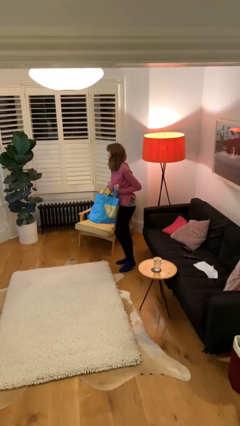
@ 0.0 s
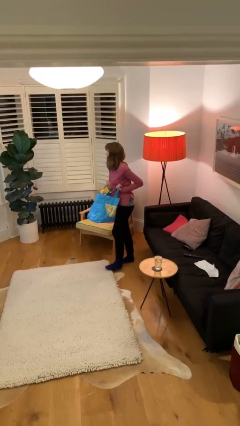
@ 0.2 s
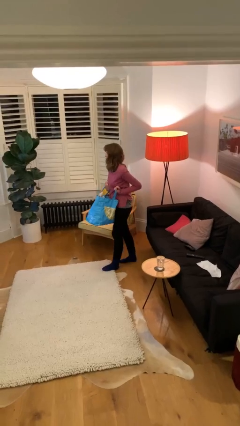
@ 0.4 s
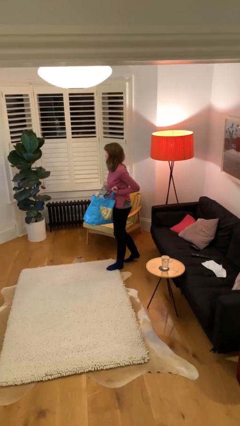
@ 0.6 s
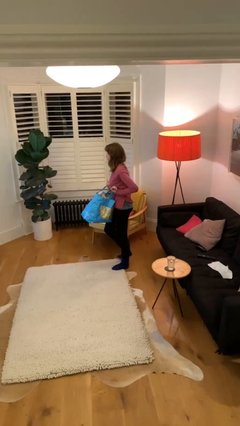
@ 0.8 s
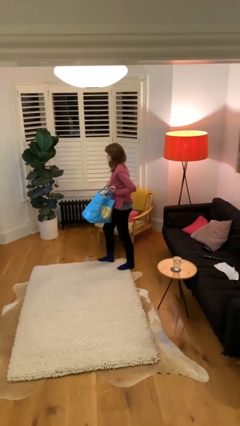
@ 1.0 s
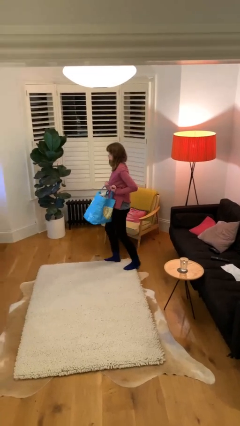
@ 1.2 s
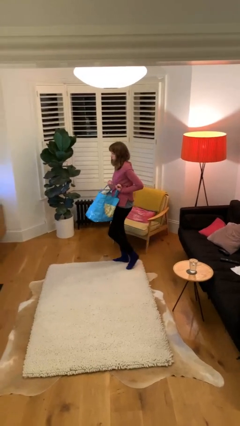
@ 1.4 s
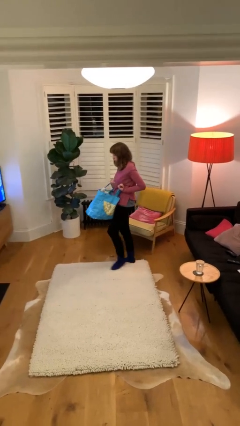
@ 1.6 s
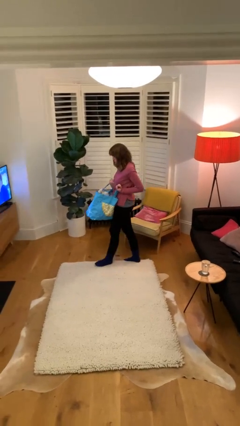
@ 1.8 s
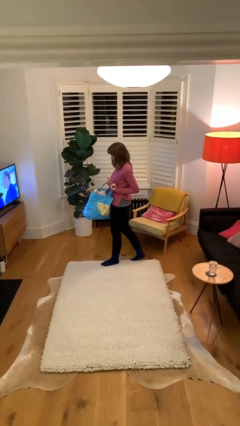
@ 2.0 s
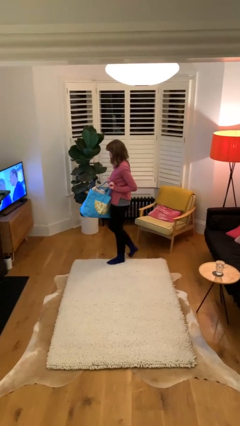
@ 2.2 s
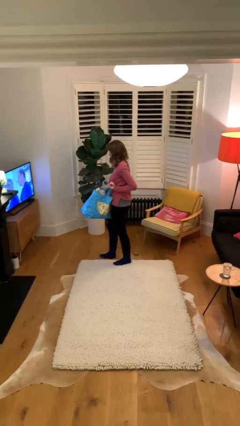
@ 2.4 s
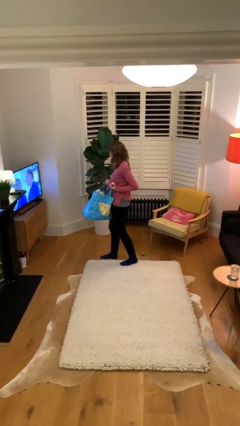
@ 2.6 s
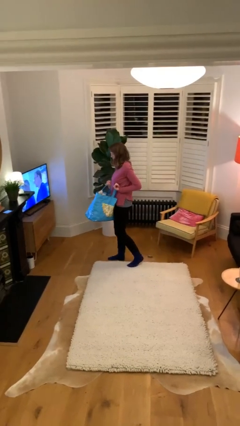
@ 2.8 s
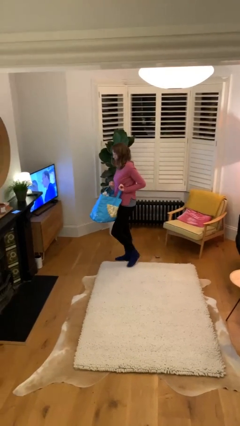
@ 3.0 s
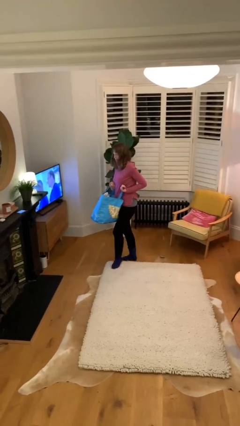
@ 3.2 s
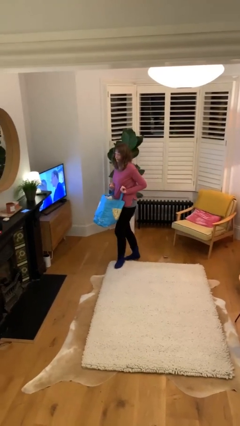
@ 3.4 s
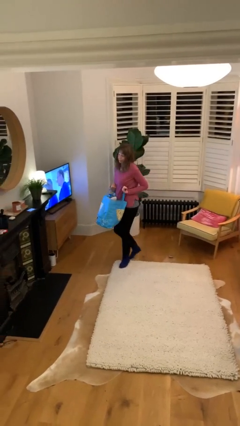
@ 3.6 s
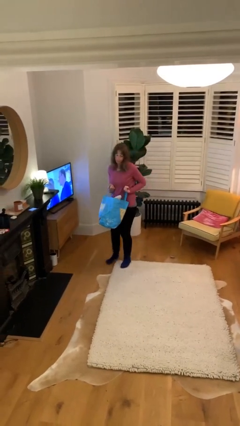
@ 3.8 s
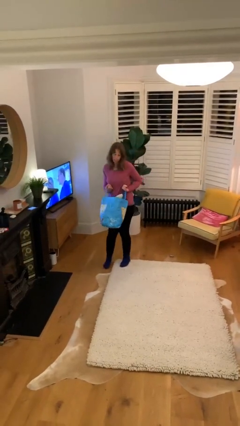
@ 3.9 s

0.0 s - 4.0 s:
person carries heavy object

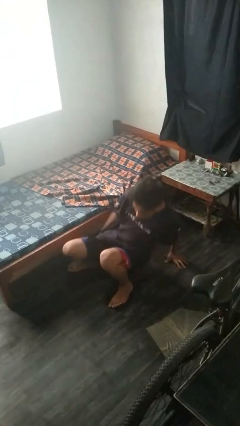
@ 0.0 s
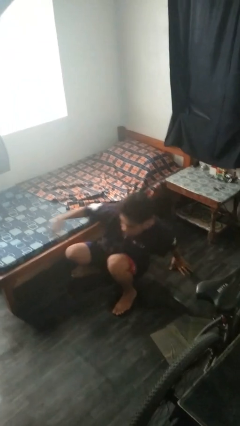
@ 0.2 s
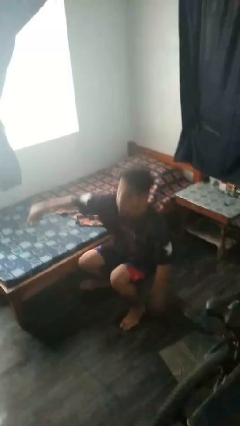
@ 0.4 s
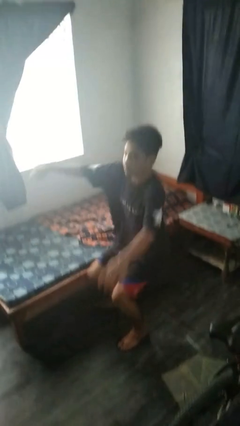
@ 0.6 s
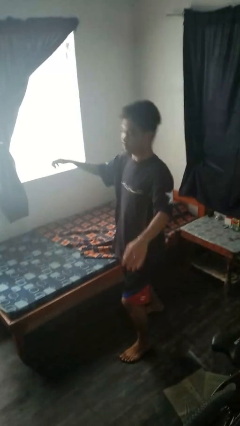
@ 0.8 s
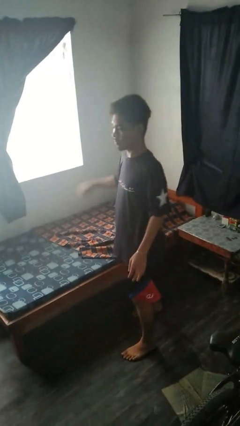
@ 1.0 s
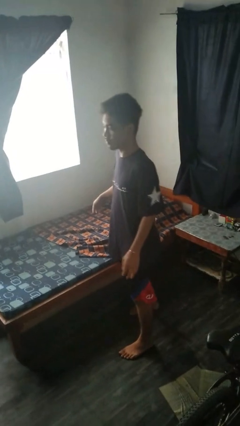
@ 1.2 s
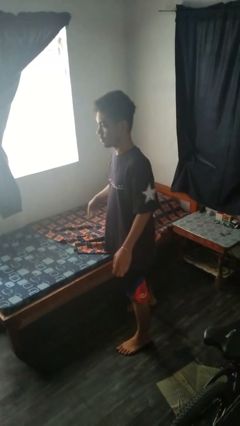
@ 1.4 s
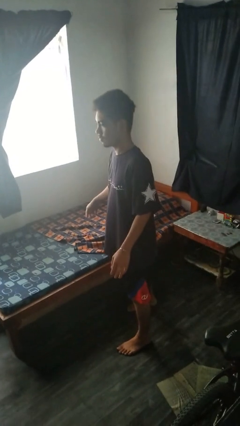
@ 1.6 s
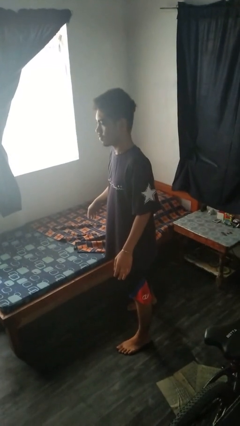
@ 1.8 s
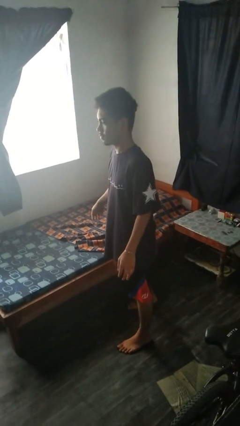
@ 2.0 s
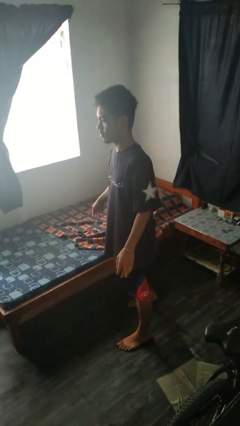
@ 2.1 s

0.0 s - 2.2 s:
person stands up from floor

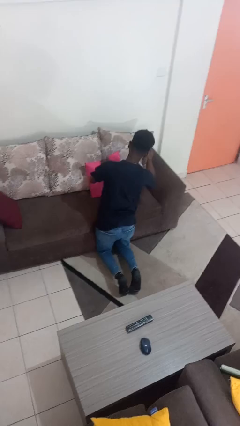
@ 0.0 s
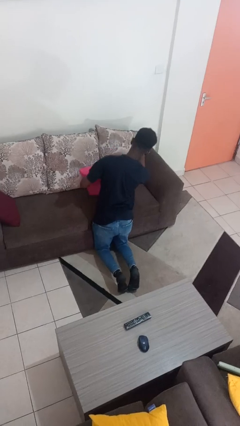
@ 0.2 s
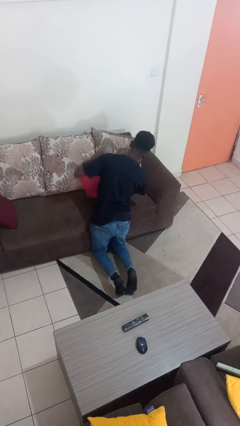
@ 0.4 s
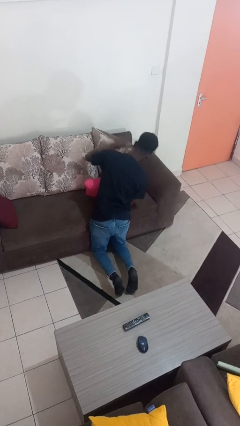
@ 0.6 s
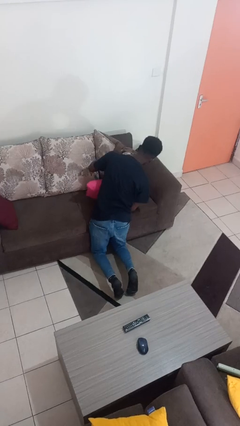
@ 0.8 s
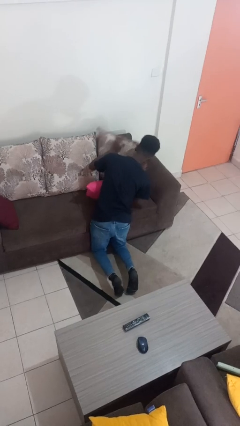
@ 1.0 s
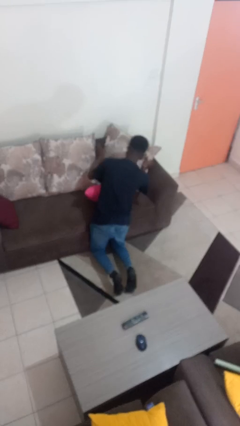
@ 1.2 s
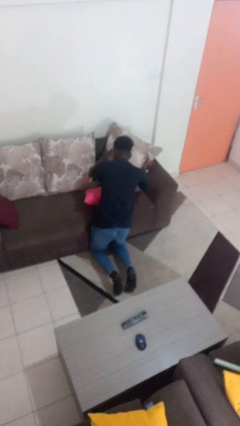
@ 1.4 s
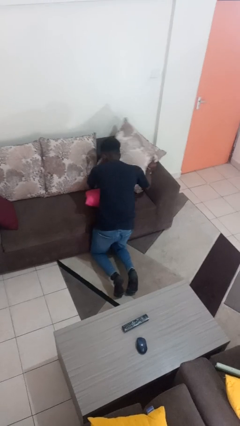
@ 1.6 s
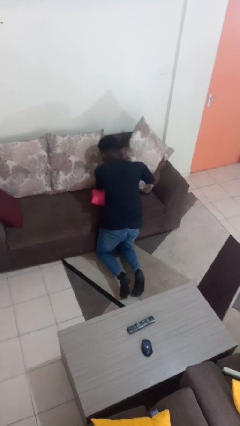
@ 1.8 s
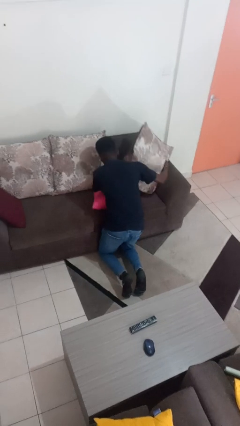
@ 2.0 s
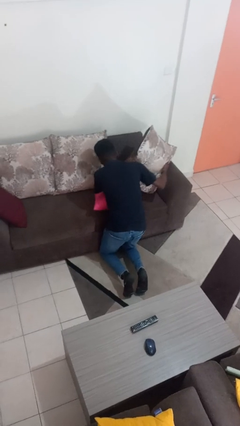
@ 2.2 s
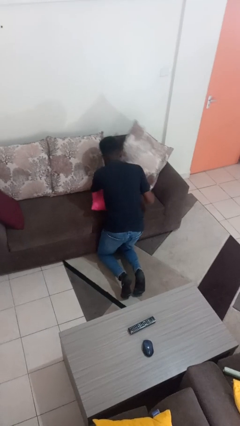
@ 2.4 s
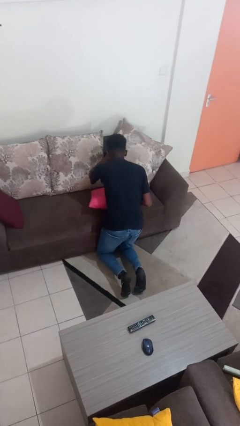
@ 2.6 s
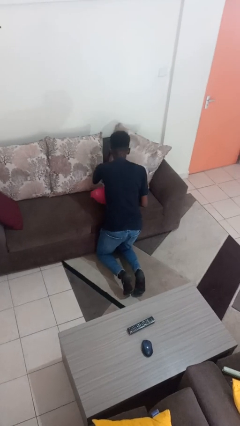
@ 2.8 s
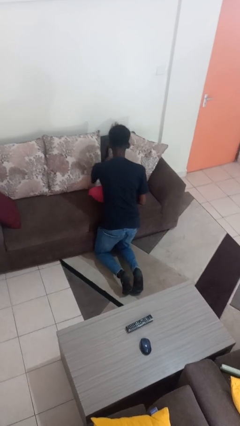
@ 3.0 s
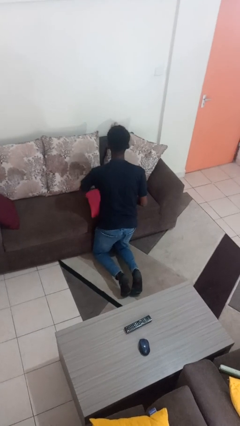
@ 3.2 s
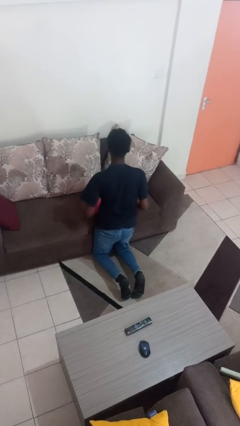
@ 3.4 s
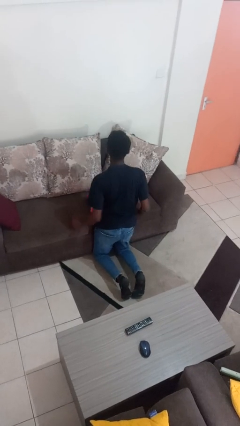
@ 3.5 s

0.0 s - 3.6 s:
person searches in couch

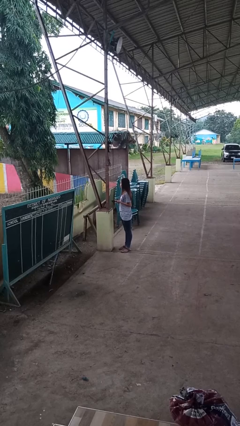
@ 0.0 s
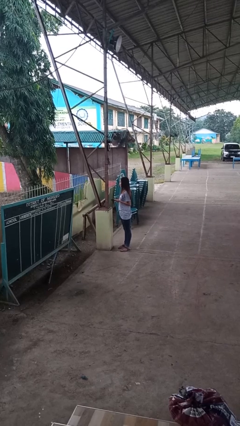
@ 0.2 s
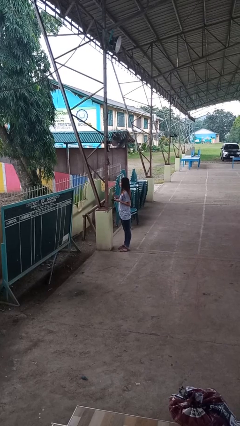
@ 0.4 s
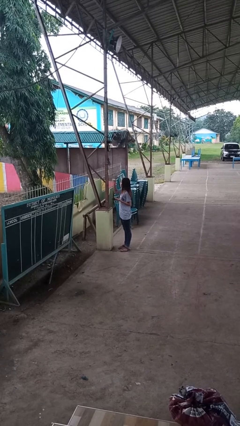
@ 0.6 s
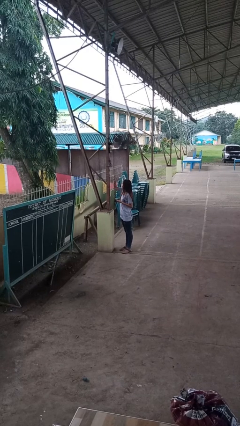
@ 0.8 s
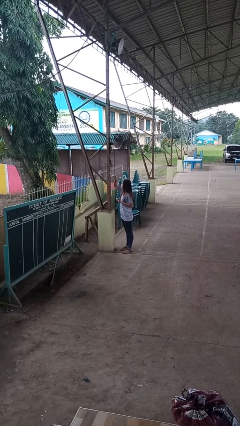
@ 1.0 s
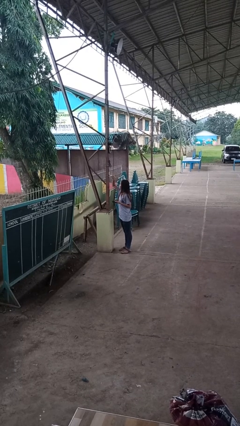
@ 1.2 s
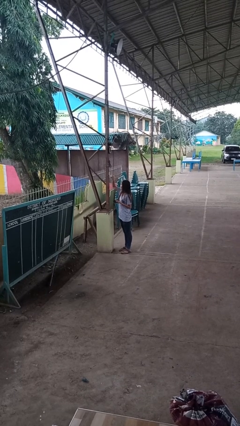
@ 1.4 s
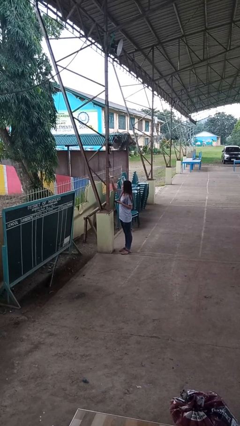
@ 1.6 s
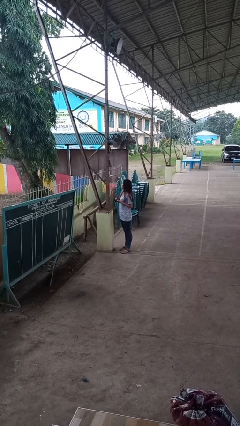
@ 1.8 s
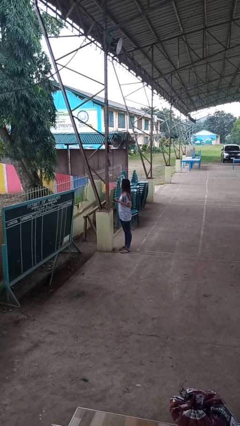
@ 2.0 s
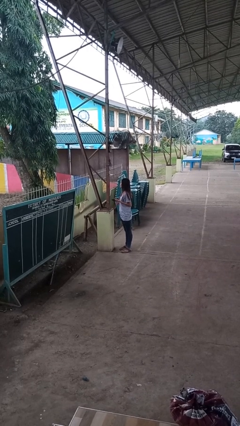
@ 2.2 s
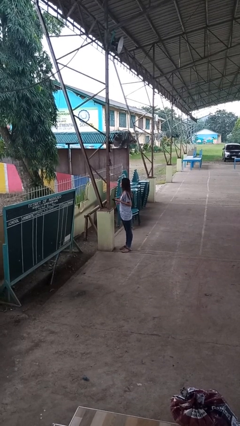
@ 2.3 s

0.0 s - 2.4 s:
person plugs into electrical socket

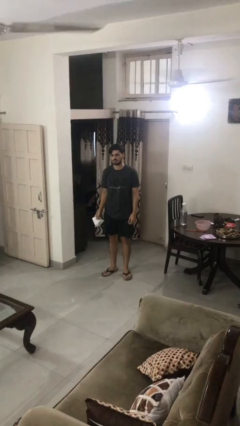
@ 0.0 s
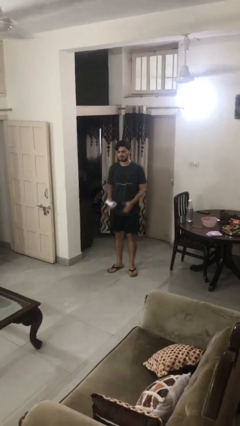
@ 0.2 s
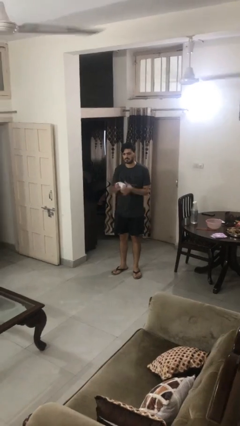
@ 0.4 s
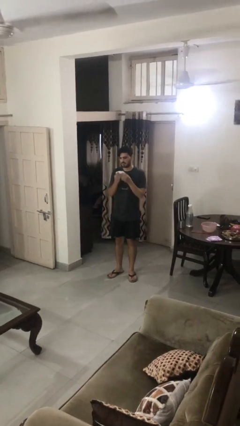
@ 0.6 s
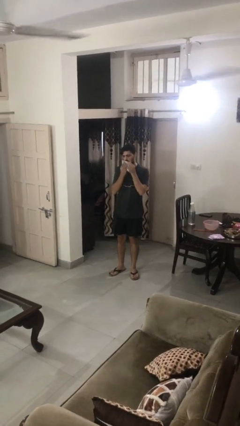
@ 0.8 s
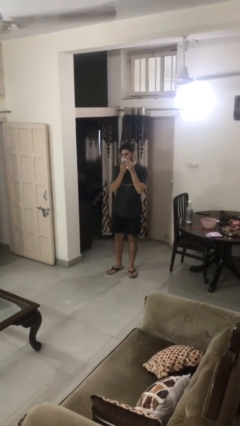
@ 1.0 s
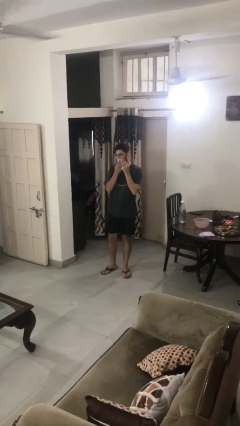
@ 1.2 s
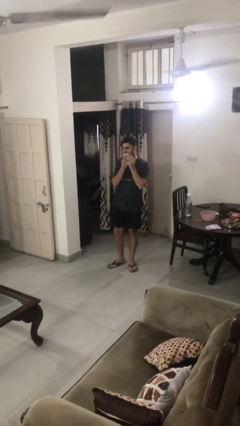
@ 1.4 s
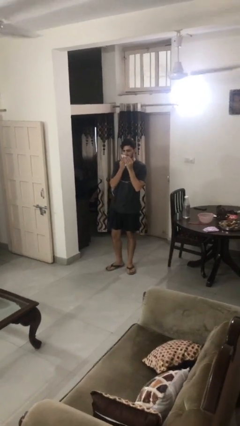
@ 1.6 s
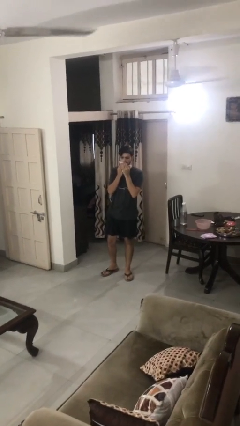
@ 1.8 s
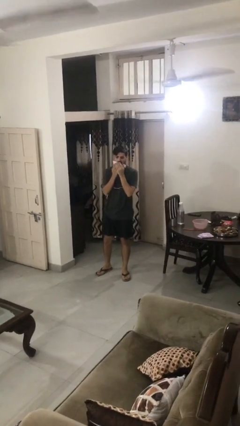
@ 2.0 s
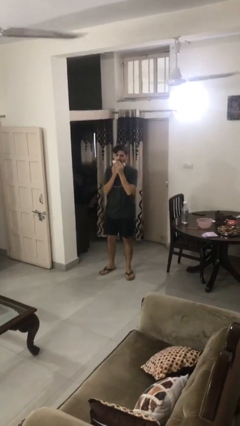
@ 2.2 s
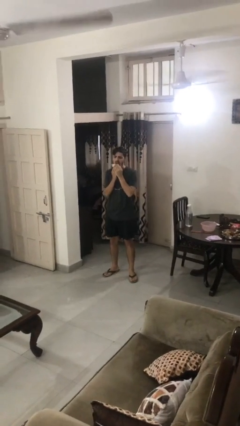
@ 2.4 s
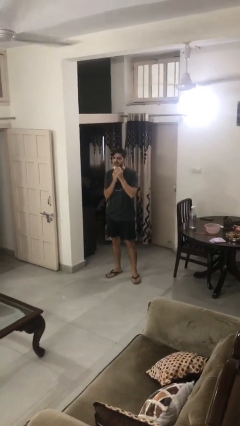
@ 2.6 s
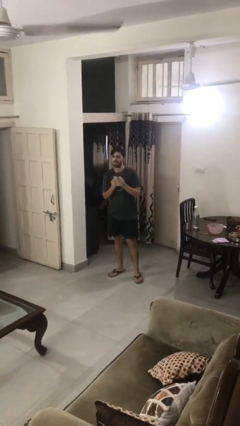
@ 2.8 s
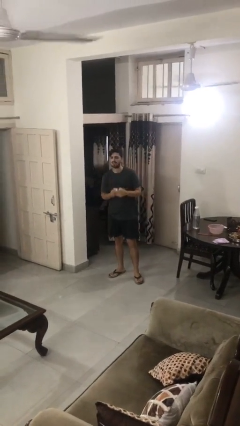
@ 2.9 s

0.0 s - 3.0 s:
person wipes mouth with napkin

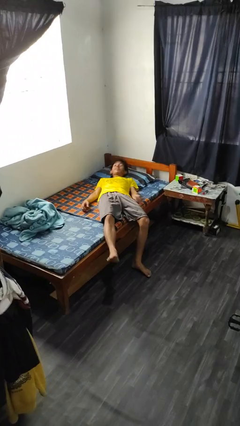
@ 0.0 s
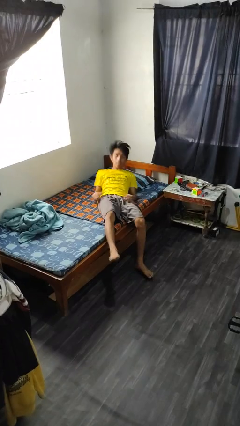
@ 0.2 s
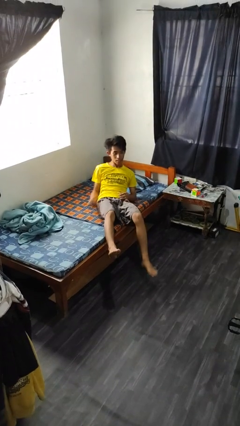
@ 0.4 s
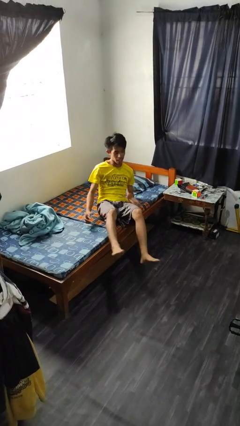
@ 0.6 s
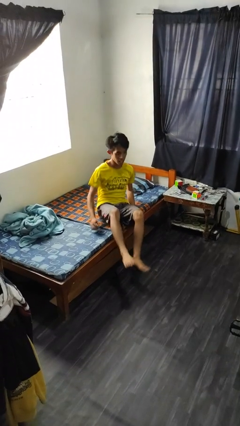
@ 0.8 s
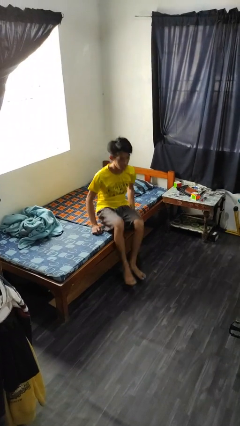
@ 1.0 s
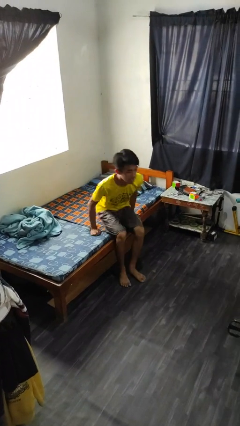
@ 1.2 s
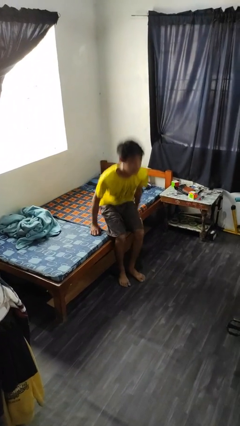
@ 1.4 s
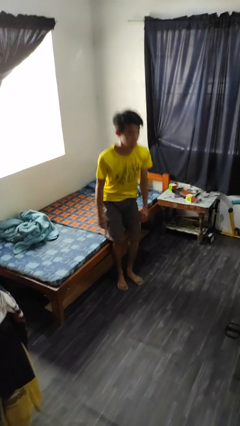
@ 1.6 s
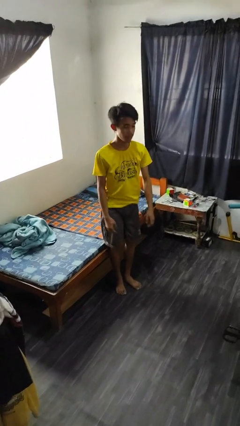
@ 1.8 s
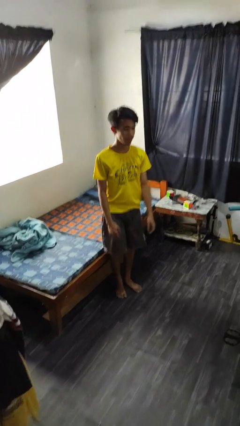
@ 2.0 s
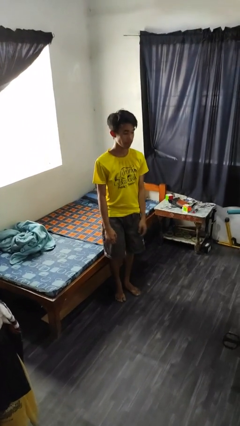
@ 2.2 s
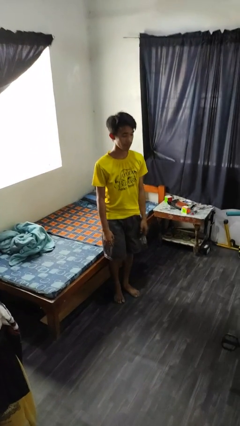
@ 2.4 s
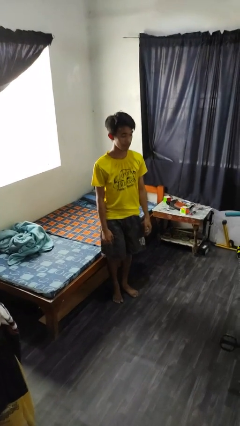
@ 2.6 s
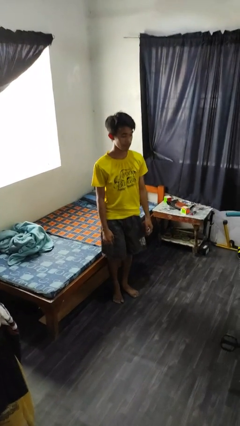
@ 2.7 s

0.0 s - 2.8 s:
person stands up
